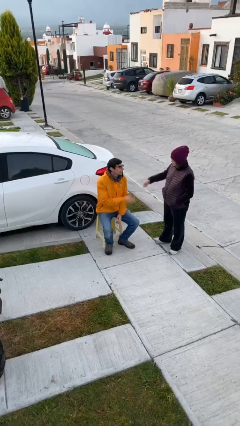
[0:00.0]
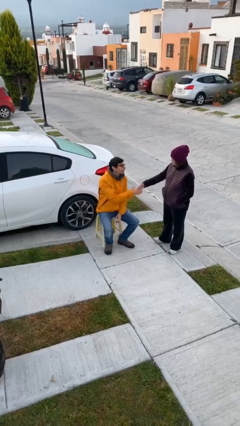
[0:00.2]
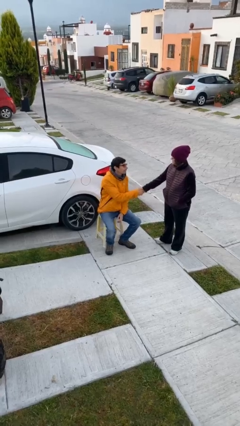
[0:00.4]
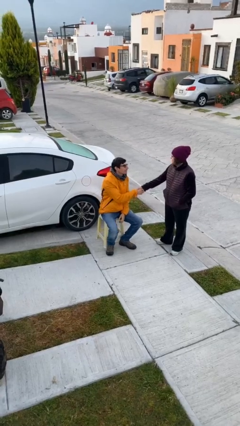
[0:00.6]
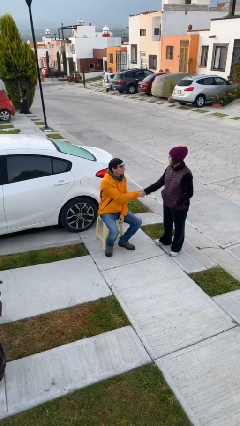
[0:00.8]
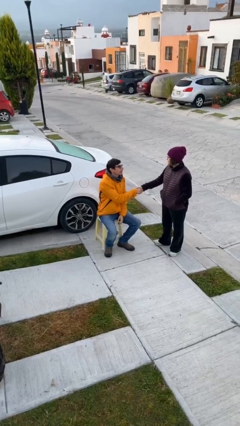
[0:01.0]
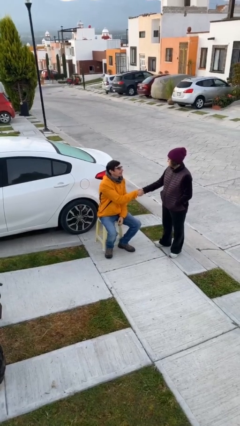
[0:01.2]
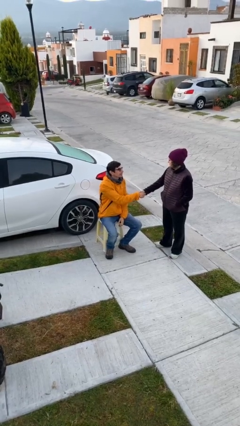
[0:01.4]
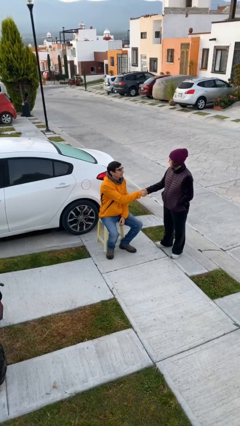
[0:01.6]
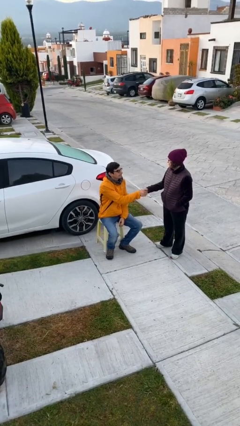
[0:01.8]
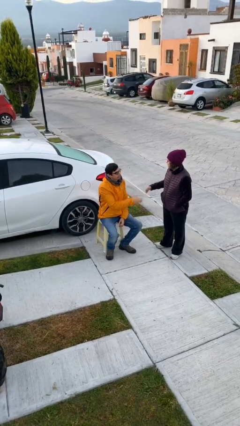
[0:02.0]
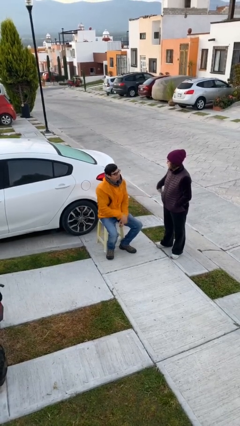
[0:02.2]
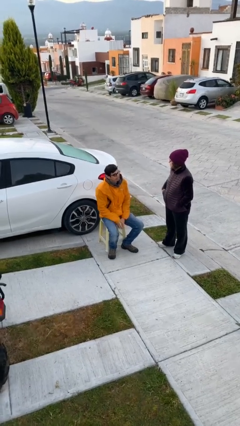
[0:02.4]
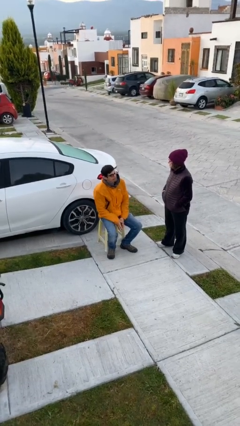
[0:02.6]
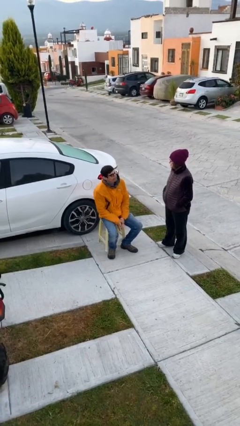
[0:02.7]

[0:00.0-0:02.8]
person shakes hand

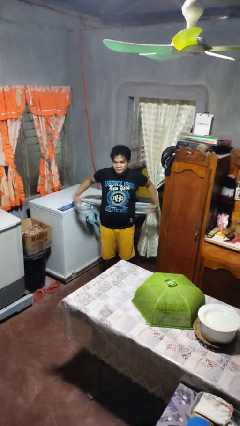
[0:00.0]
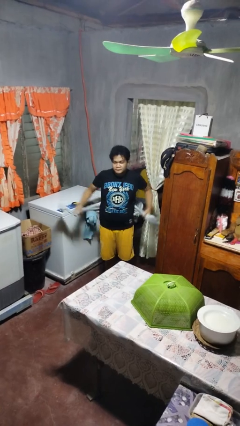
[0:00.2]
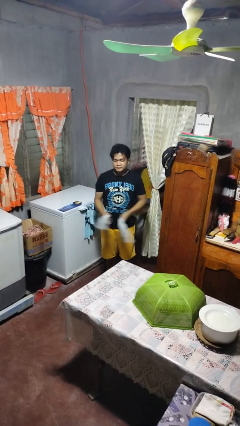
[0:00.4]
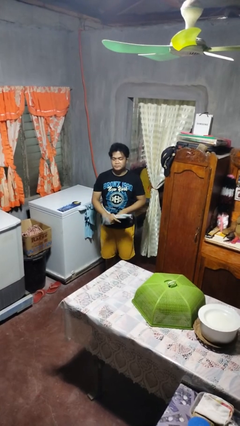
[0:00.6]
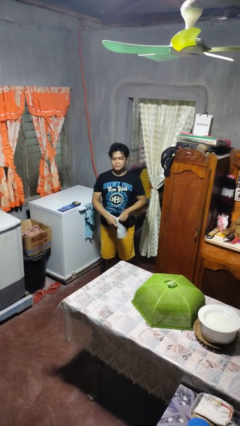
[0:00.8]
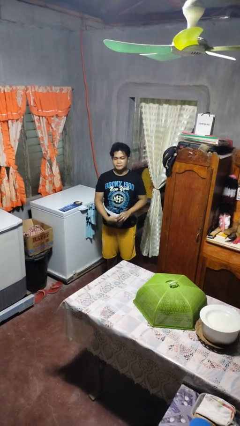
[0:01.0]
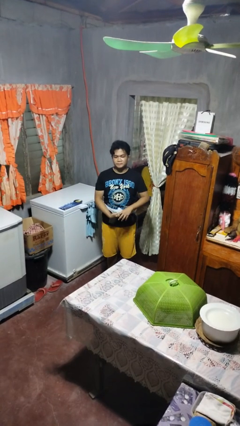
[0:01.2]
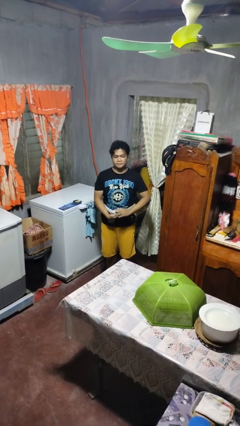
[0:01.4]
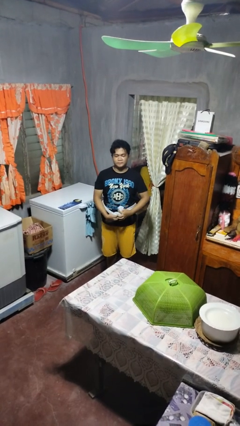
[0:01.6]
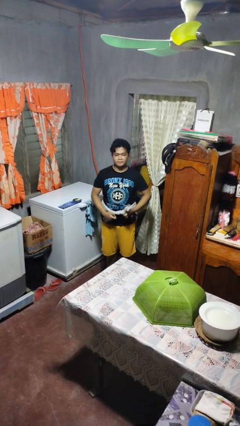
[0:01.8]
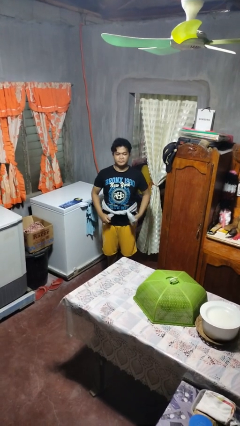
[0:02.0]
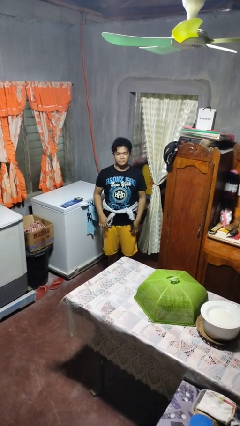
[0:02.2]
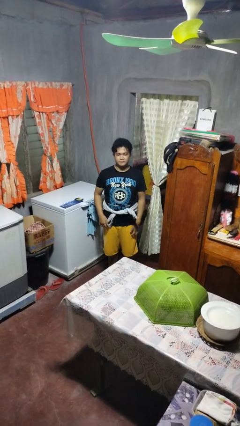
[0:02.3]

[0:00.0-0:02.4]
person ties jacket around waist

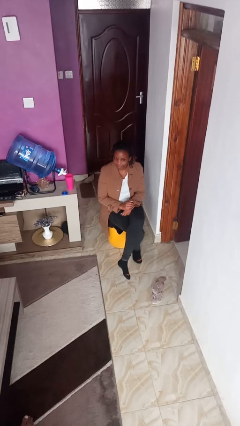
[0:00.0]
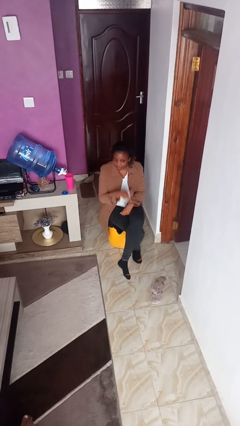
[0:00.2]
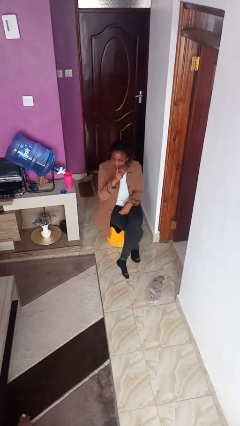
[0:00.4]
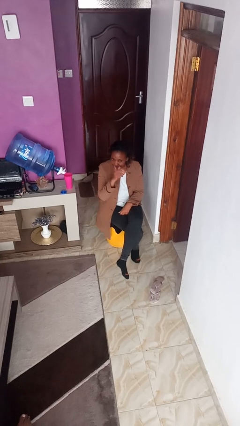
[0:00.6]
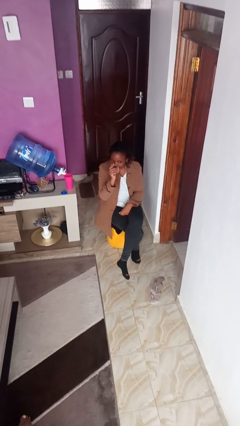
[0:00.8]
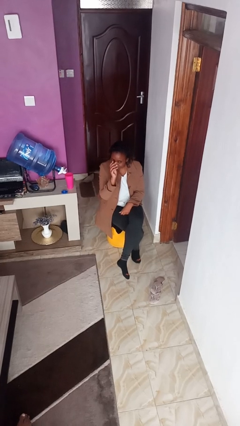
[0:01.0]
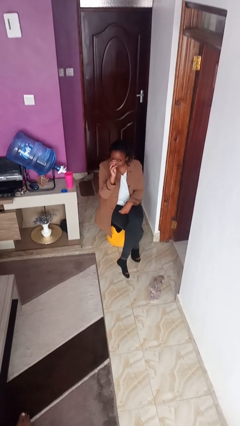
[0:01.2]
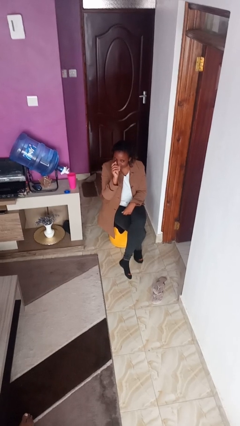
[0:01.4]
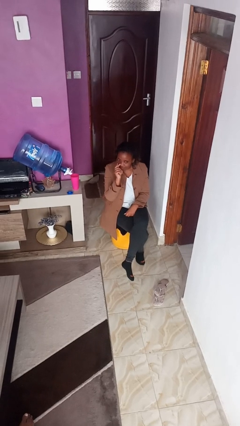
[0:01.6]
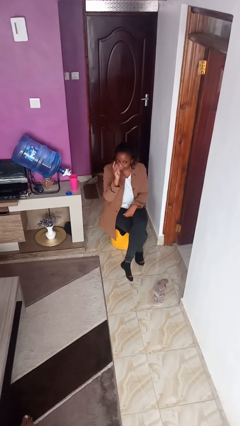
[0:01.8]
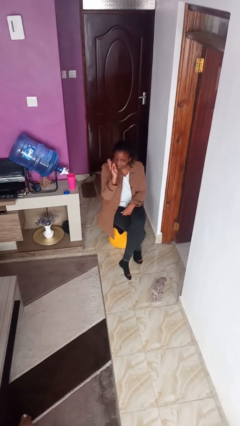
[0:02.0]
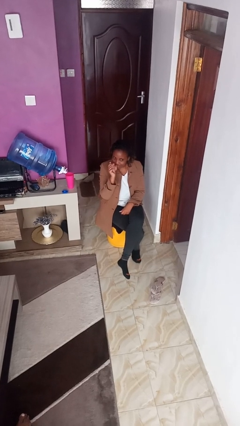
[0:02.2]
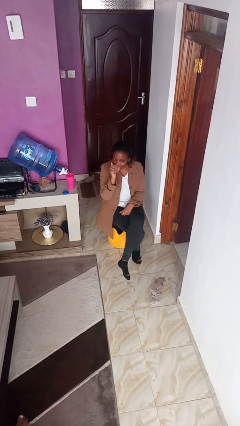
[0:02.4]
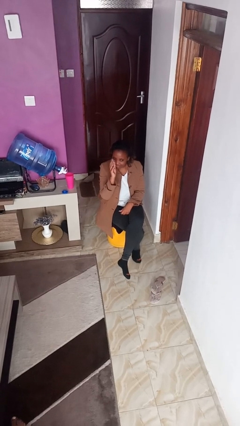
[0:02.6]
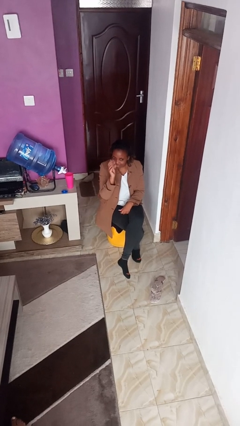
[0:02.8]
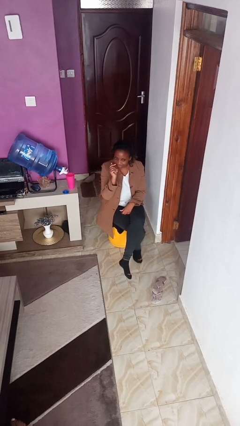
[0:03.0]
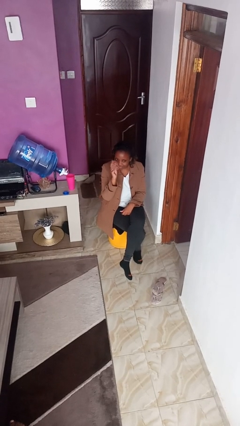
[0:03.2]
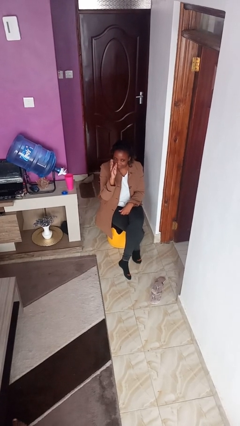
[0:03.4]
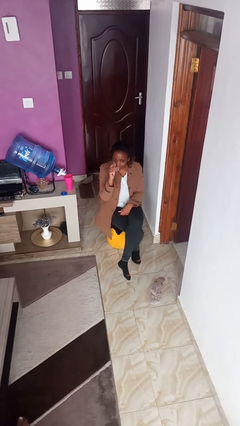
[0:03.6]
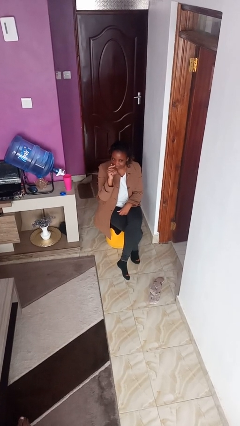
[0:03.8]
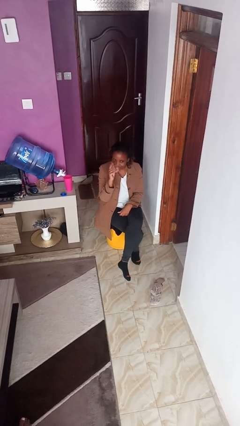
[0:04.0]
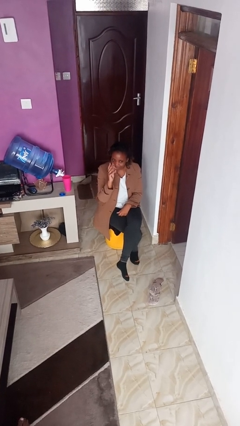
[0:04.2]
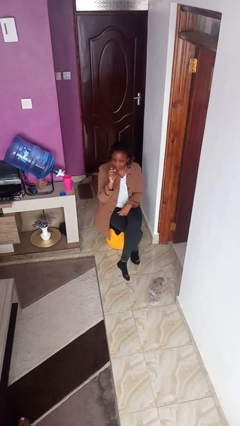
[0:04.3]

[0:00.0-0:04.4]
person gestures come here

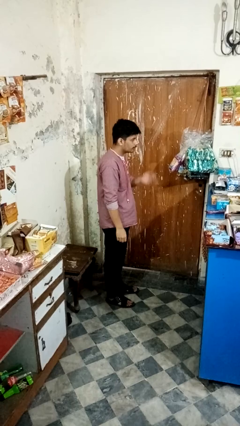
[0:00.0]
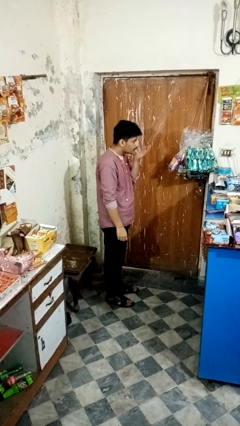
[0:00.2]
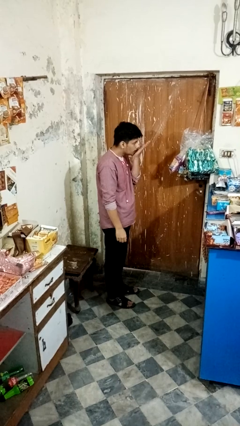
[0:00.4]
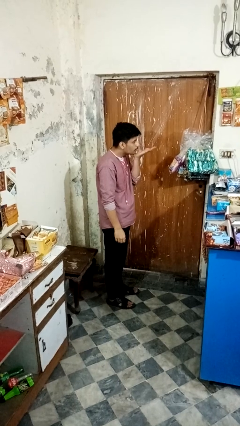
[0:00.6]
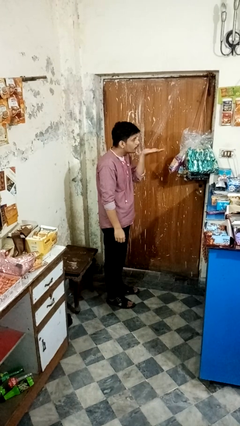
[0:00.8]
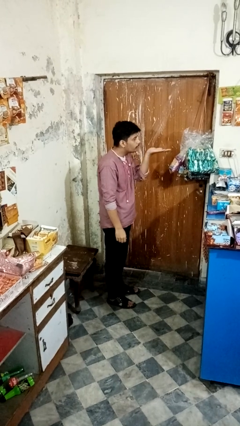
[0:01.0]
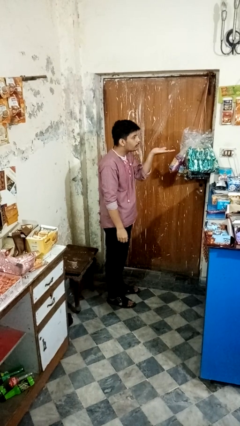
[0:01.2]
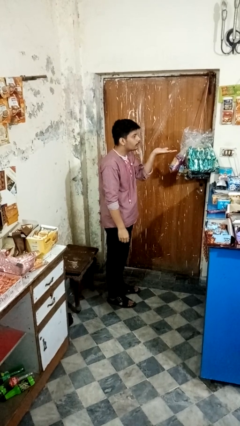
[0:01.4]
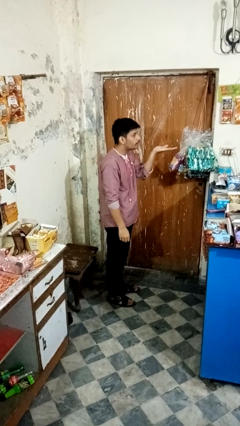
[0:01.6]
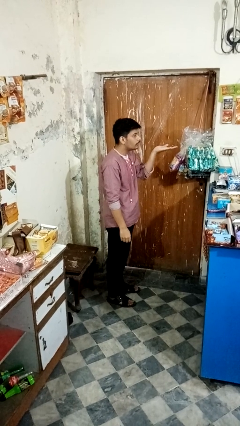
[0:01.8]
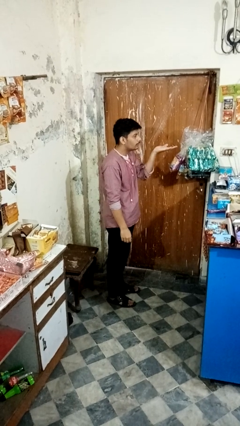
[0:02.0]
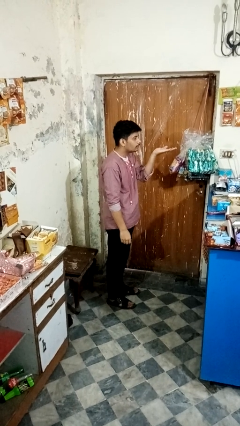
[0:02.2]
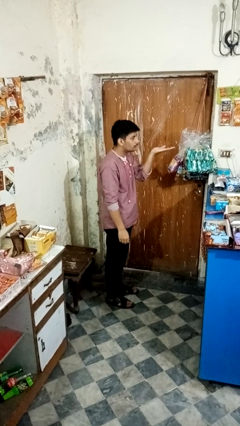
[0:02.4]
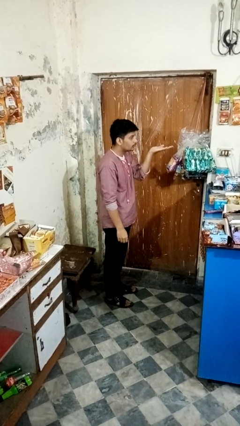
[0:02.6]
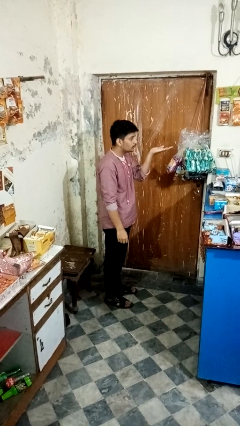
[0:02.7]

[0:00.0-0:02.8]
person gestures blow kiss

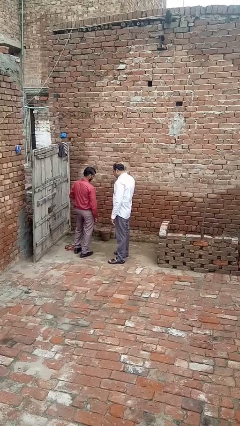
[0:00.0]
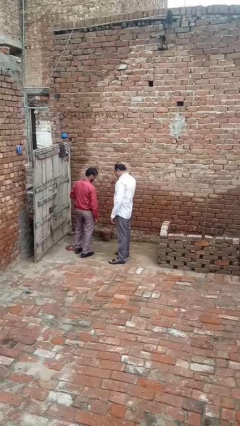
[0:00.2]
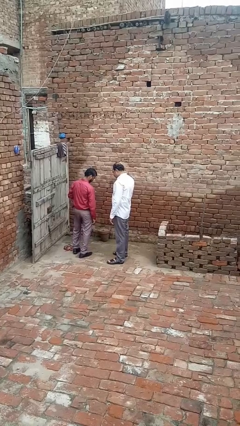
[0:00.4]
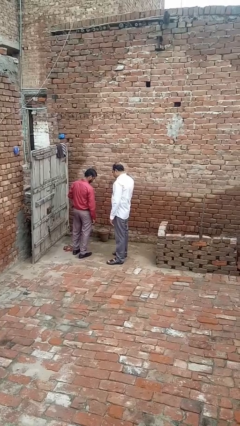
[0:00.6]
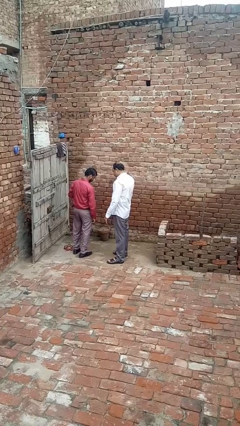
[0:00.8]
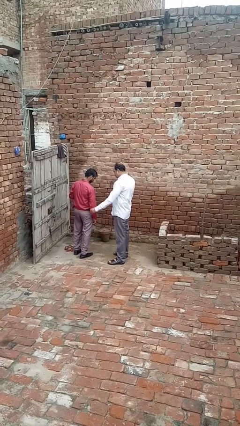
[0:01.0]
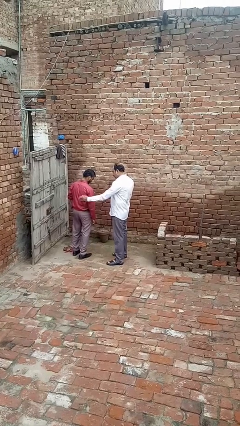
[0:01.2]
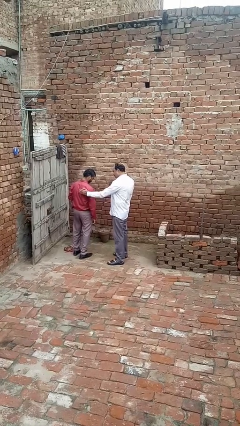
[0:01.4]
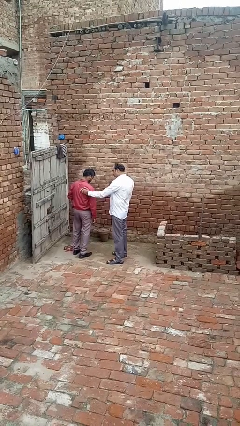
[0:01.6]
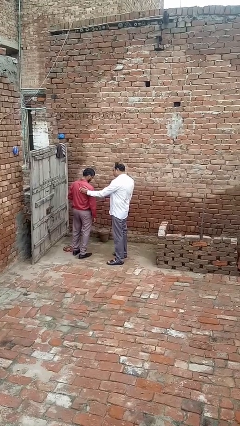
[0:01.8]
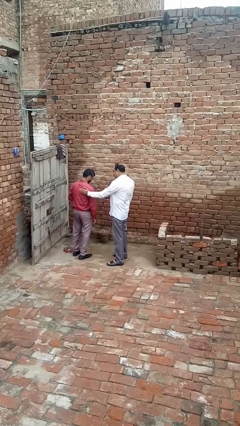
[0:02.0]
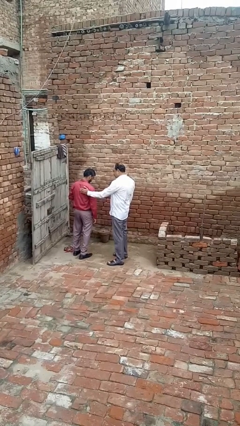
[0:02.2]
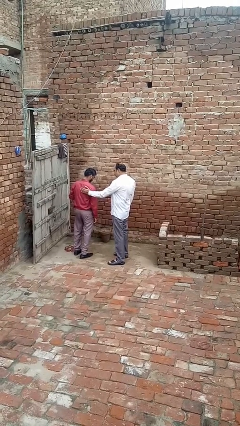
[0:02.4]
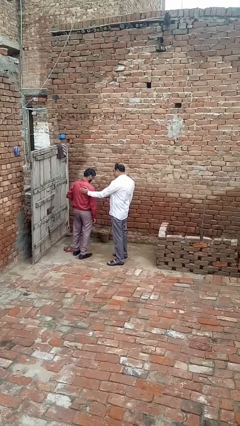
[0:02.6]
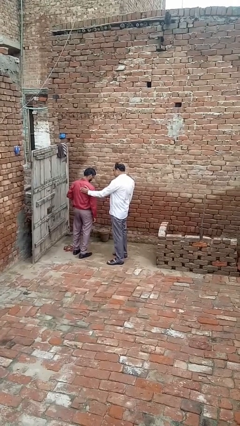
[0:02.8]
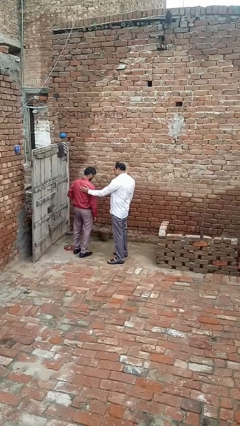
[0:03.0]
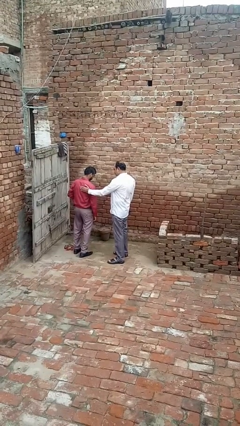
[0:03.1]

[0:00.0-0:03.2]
person touches back of person

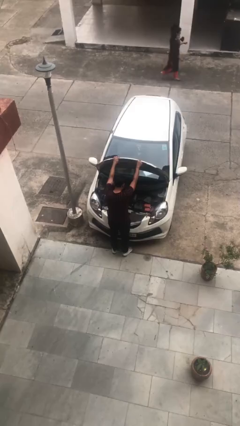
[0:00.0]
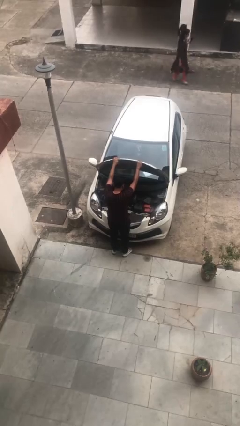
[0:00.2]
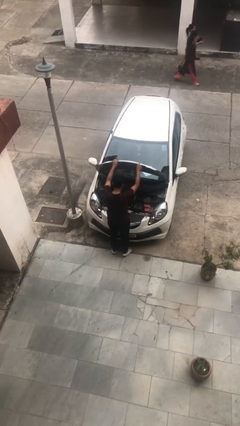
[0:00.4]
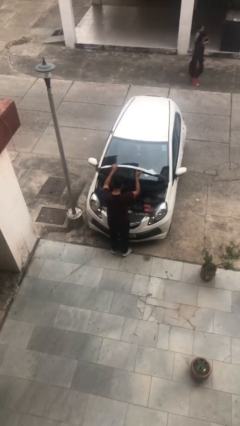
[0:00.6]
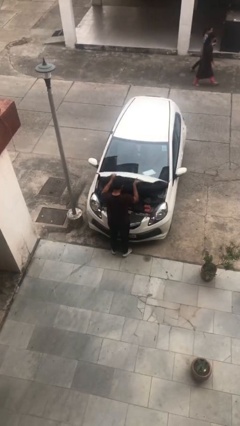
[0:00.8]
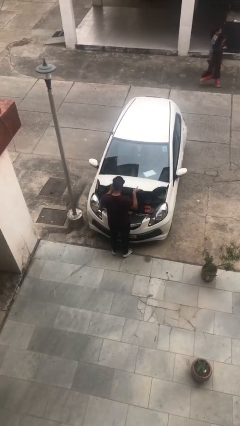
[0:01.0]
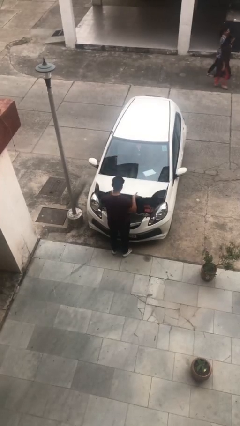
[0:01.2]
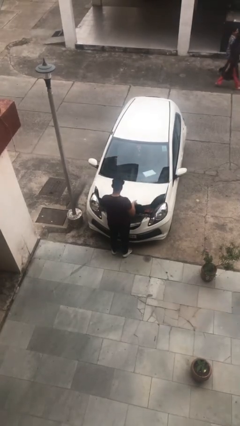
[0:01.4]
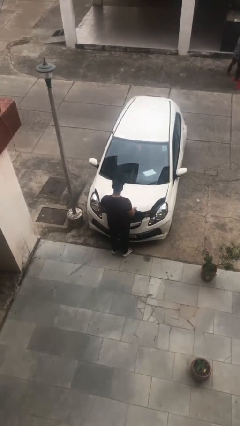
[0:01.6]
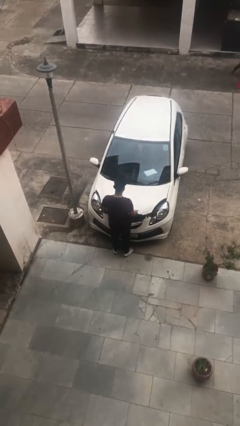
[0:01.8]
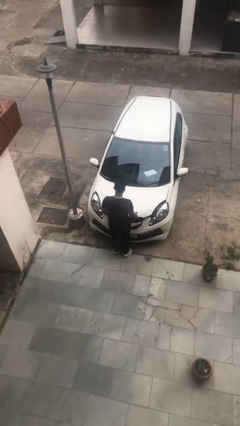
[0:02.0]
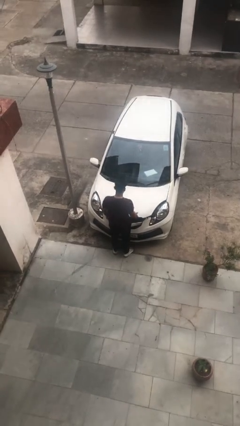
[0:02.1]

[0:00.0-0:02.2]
person closes car hood
